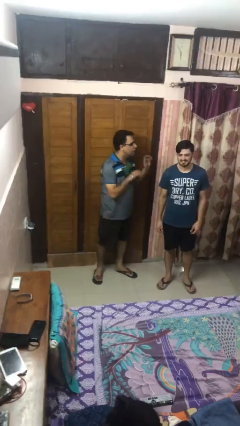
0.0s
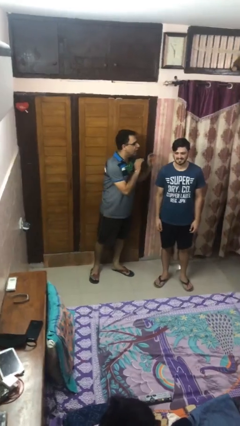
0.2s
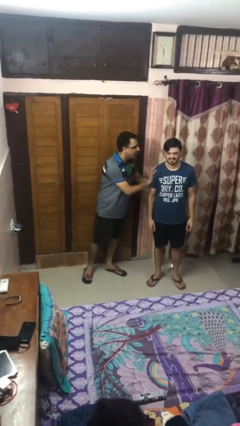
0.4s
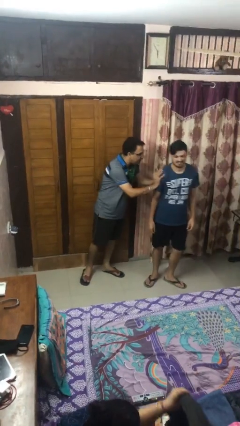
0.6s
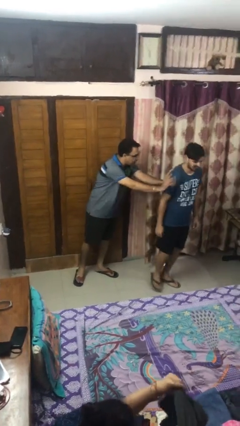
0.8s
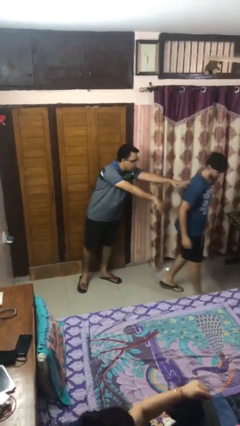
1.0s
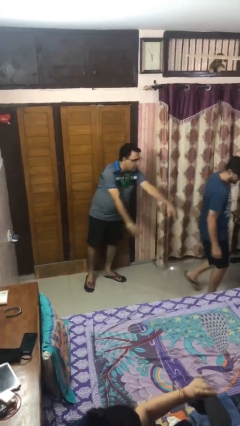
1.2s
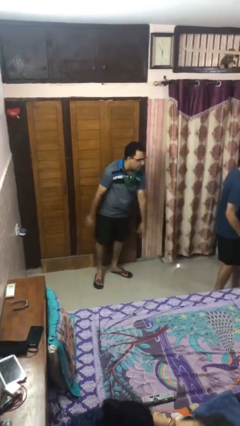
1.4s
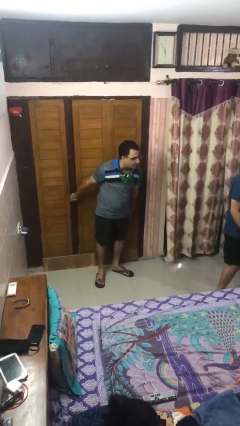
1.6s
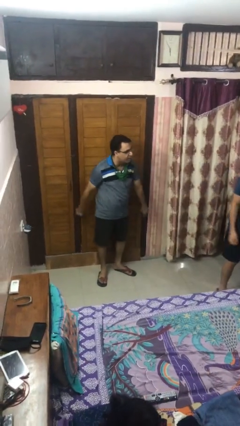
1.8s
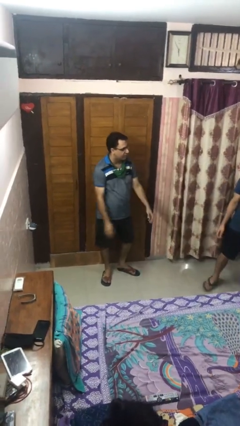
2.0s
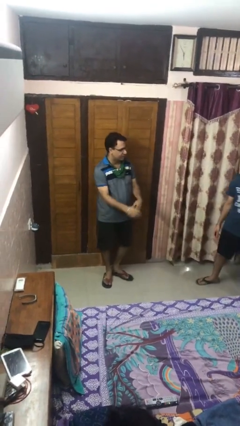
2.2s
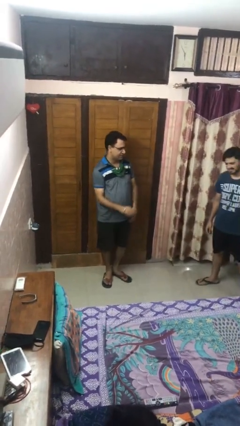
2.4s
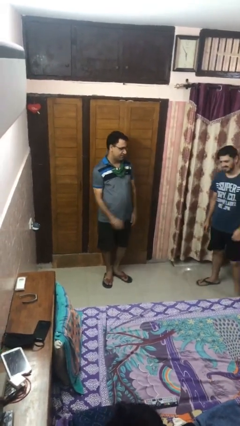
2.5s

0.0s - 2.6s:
person shoves person

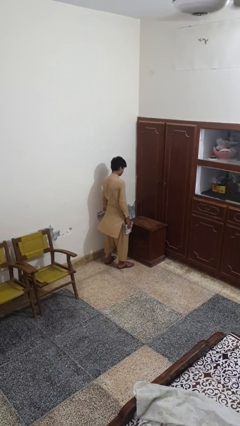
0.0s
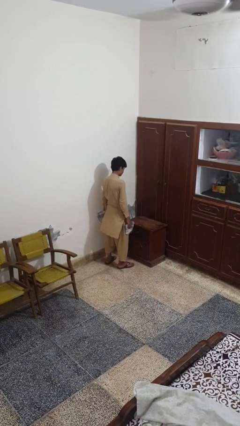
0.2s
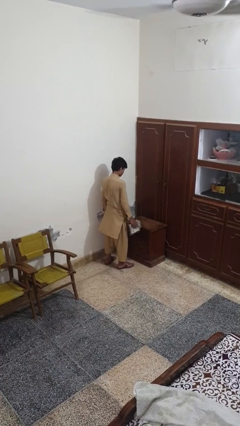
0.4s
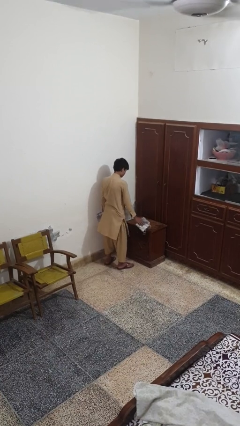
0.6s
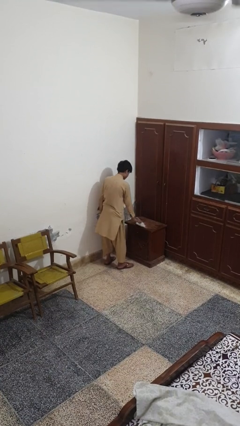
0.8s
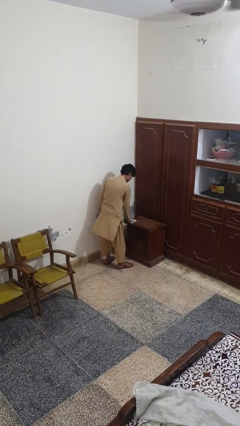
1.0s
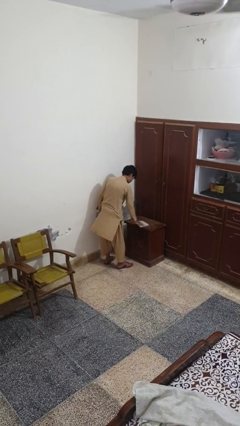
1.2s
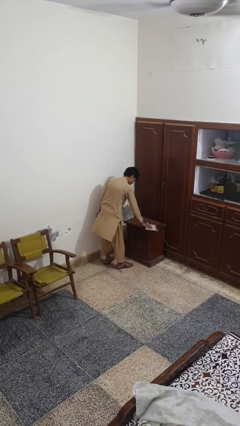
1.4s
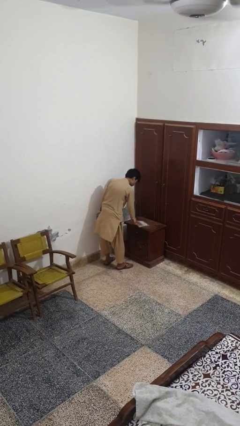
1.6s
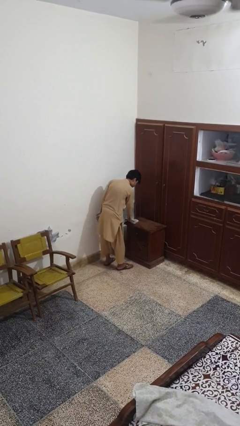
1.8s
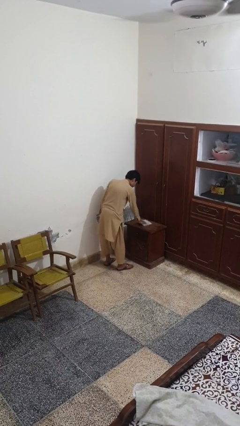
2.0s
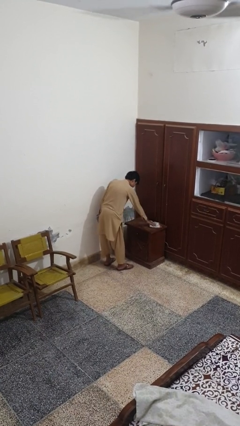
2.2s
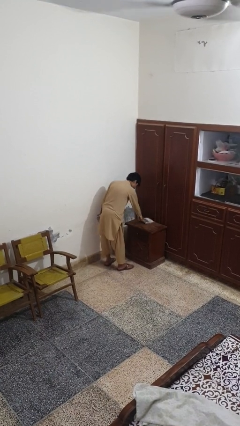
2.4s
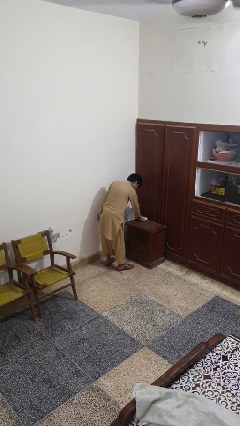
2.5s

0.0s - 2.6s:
person cleans table with rag

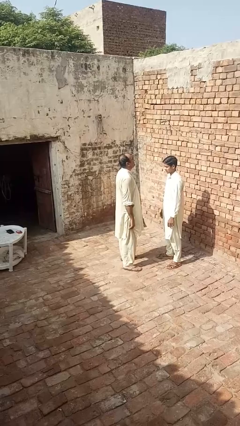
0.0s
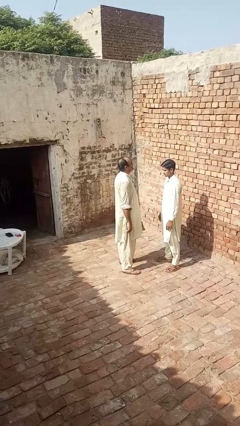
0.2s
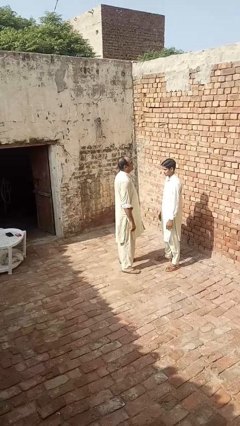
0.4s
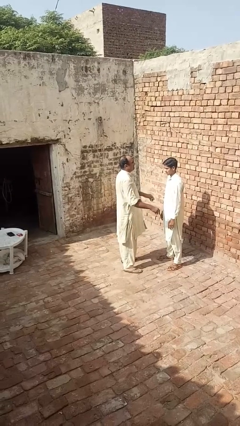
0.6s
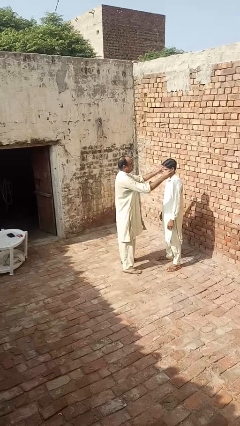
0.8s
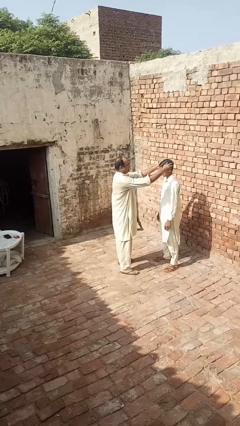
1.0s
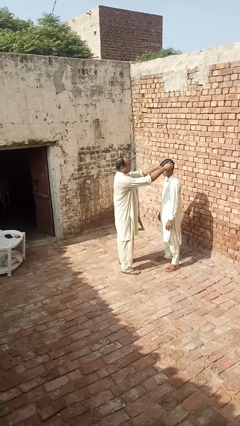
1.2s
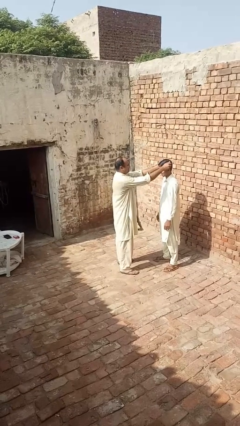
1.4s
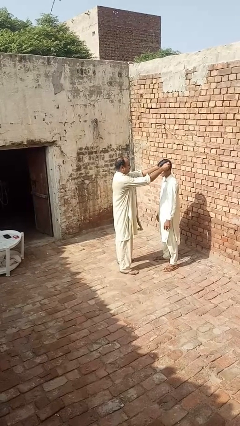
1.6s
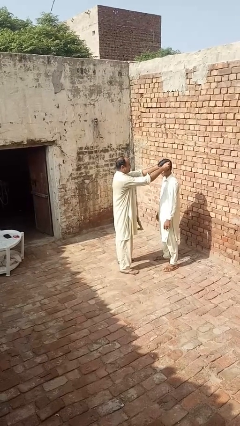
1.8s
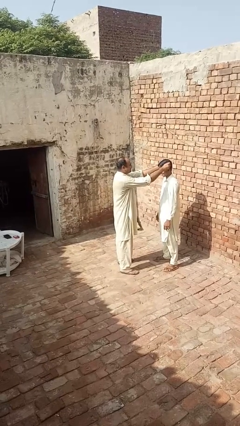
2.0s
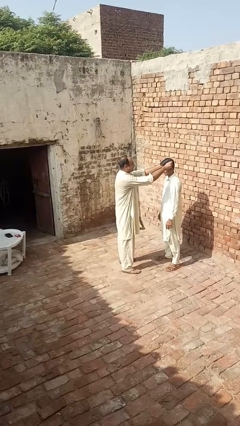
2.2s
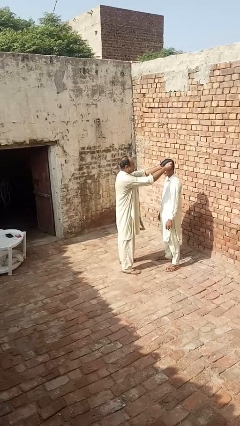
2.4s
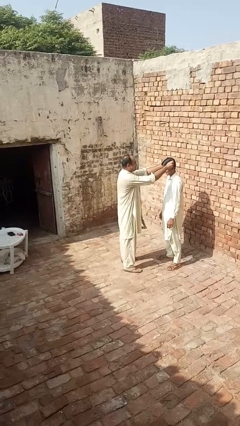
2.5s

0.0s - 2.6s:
person grabs person by hair

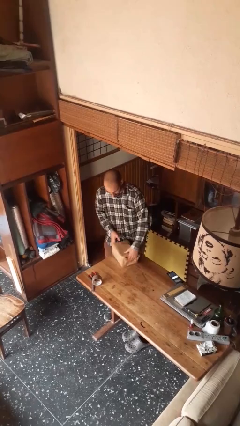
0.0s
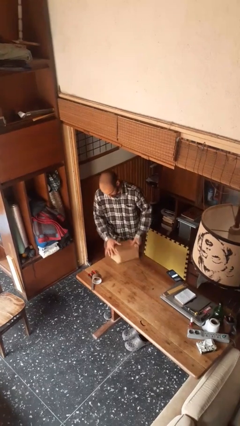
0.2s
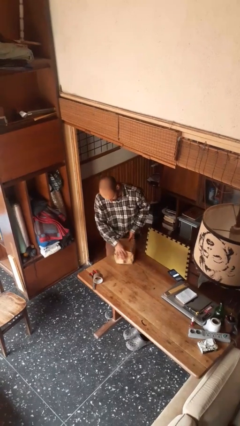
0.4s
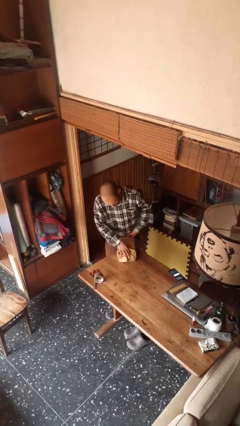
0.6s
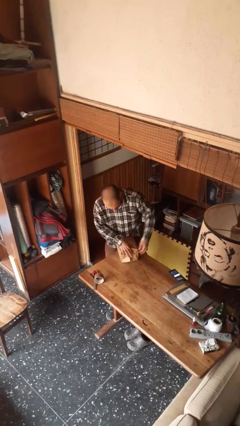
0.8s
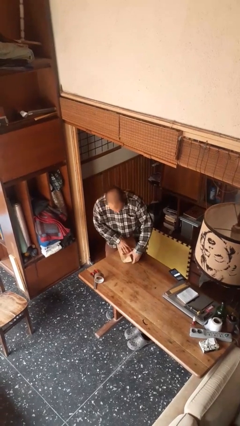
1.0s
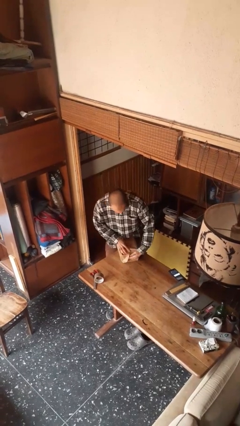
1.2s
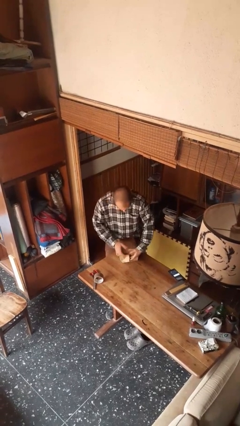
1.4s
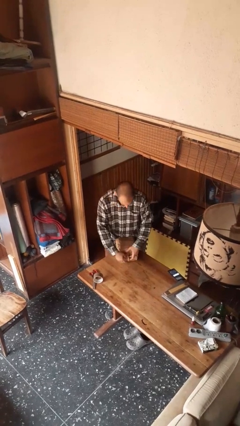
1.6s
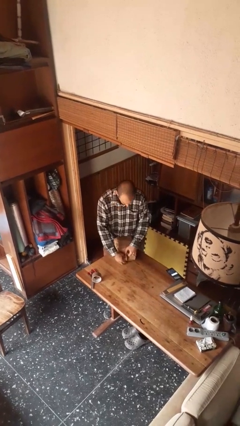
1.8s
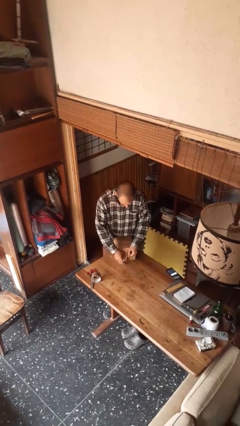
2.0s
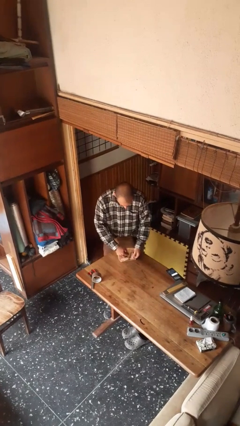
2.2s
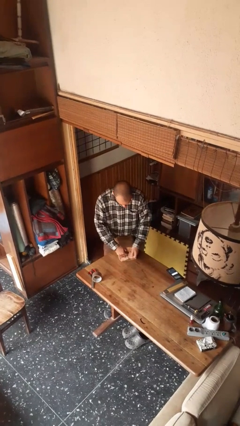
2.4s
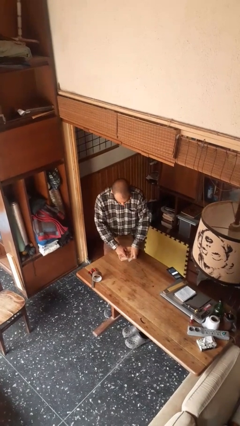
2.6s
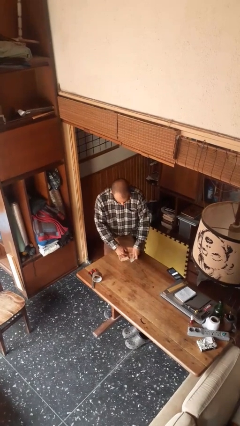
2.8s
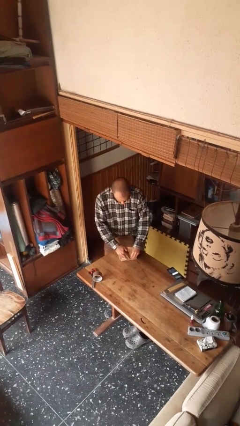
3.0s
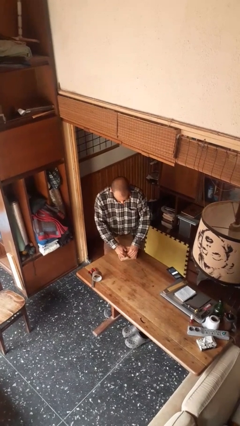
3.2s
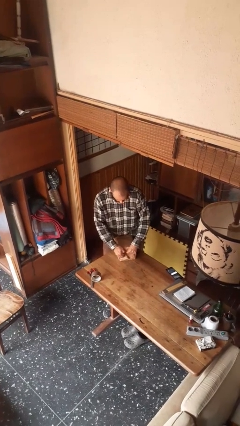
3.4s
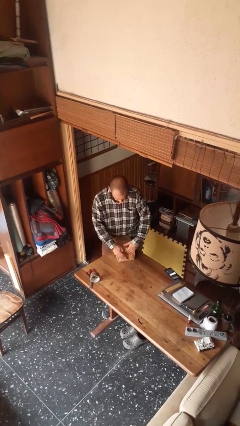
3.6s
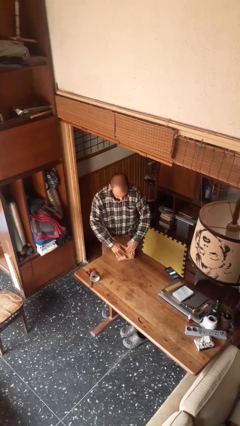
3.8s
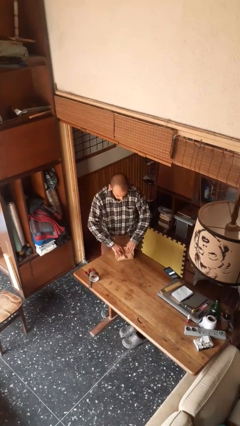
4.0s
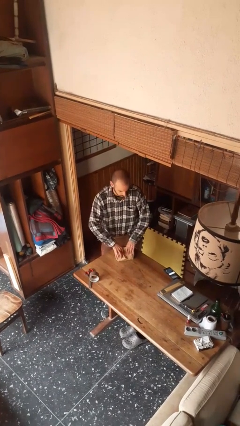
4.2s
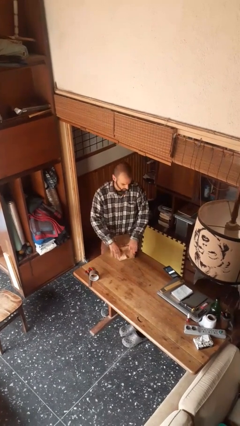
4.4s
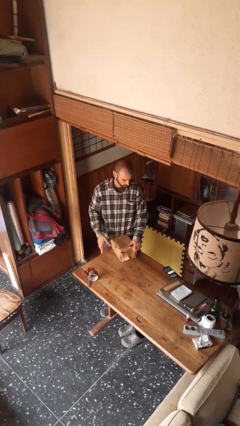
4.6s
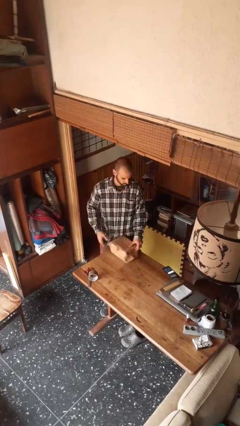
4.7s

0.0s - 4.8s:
person wraps box

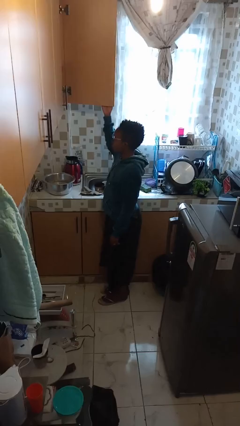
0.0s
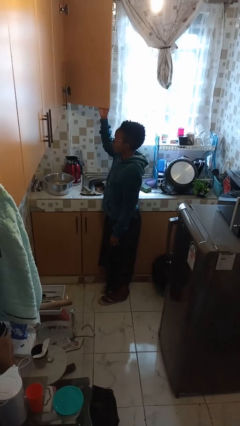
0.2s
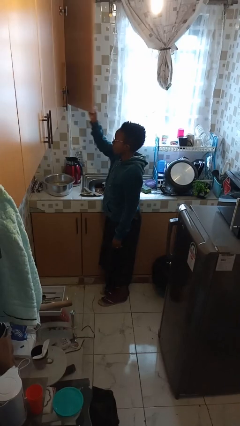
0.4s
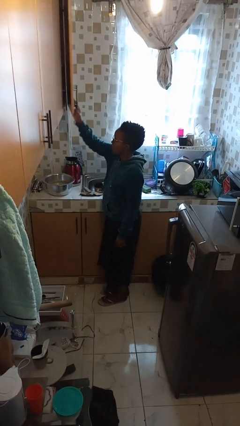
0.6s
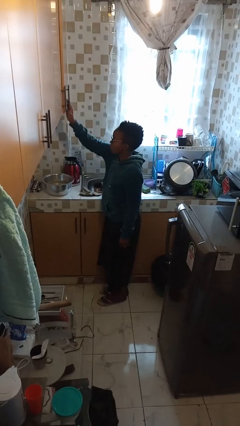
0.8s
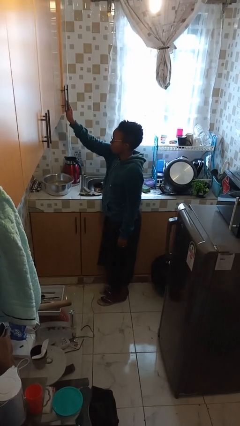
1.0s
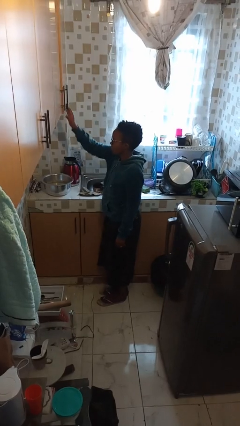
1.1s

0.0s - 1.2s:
person closes cabinet

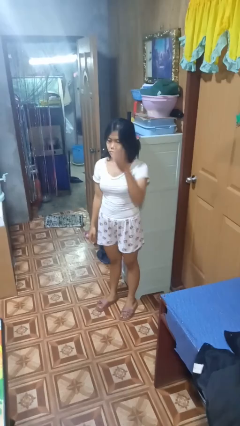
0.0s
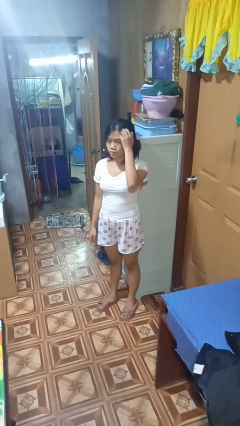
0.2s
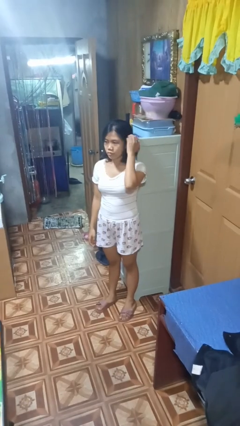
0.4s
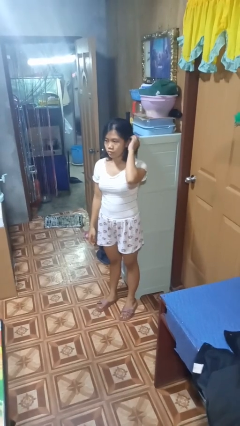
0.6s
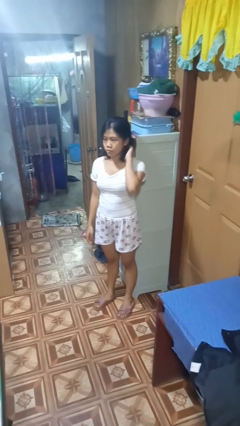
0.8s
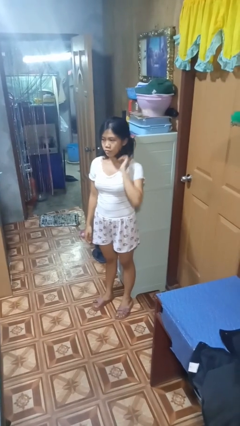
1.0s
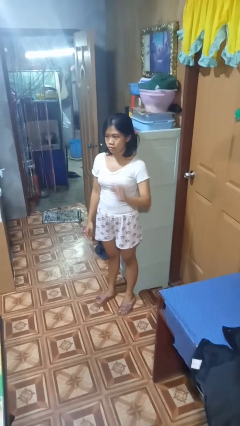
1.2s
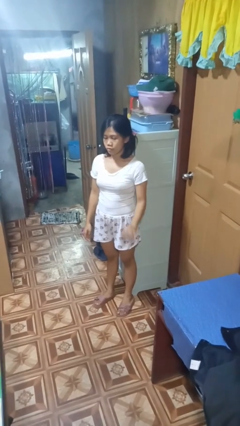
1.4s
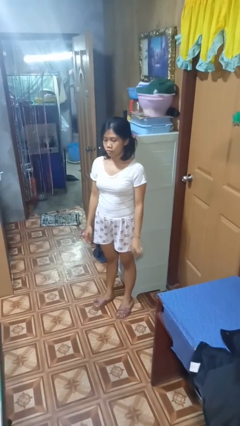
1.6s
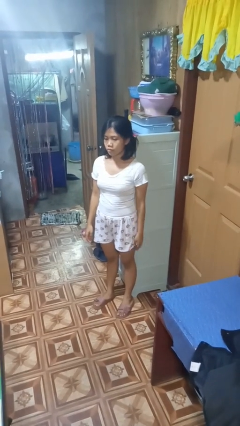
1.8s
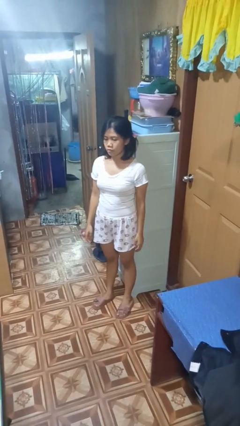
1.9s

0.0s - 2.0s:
person strokes hair

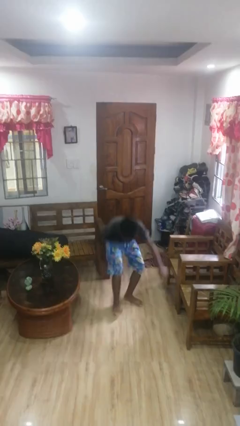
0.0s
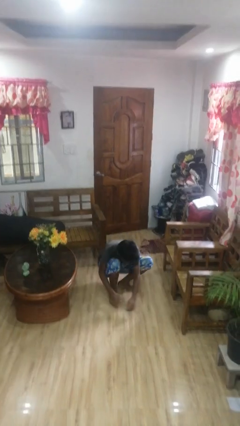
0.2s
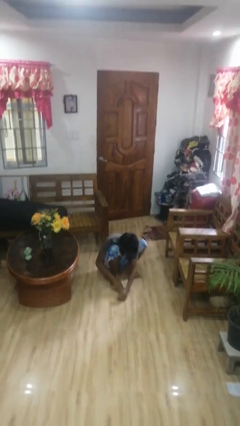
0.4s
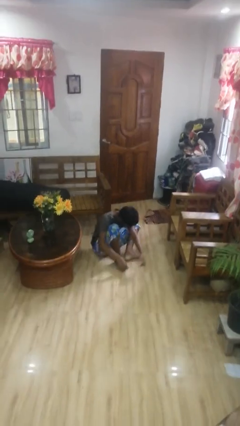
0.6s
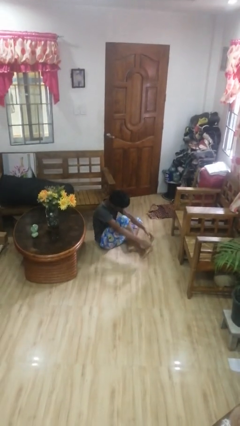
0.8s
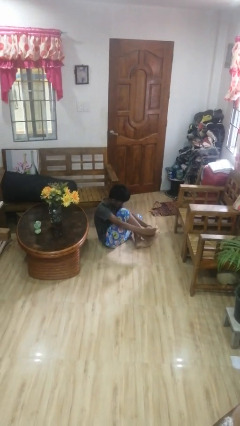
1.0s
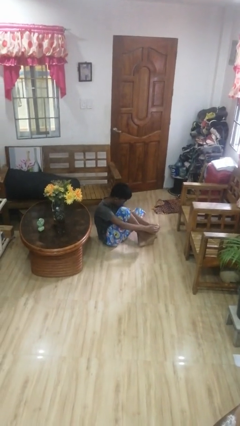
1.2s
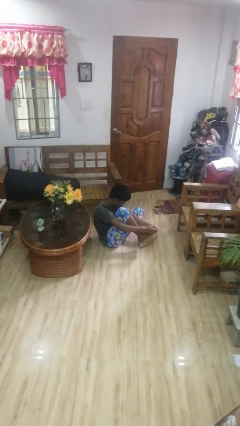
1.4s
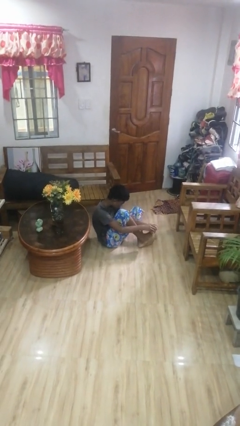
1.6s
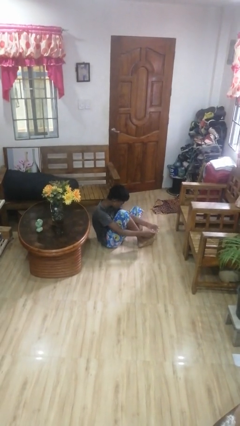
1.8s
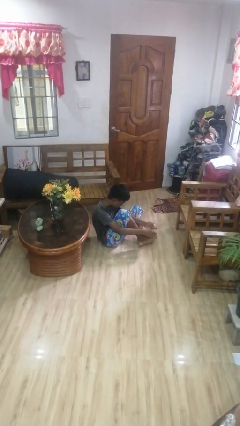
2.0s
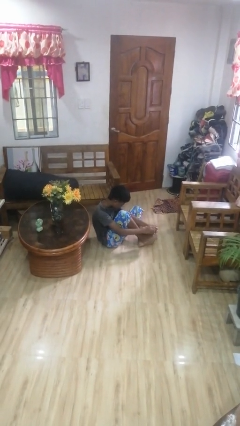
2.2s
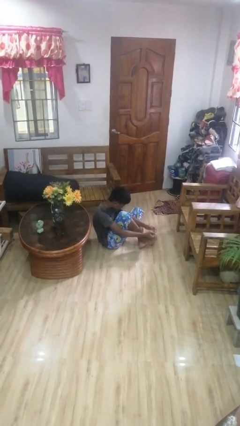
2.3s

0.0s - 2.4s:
person lies down on floor
